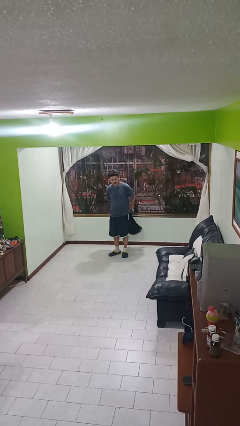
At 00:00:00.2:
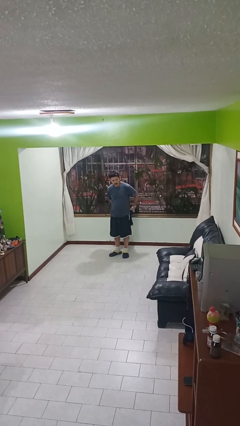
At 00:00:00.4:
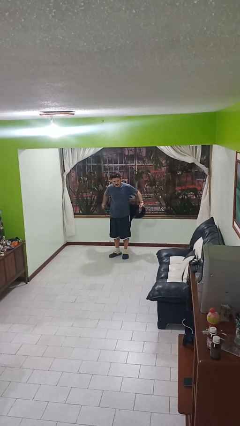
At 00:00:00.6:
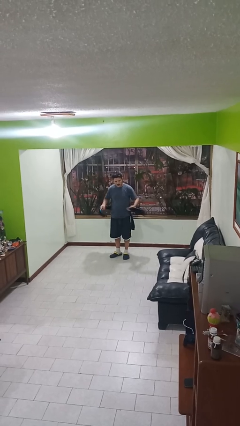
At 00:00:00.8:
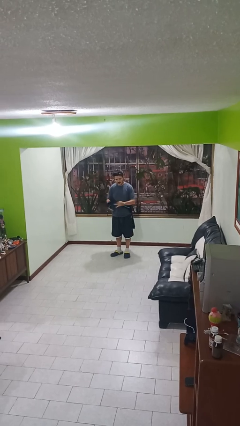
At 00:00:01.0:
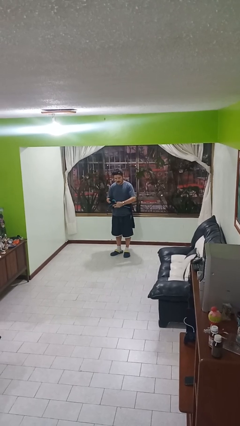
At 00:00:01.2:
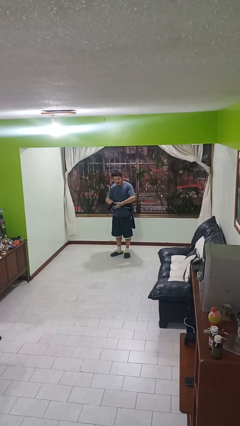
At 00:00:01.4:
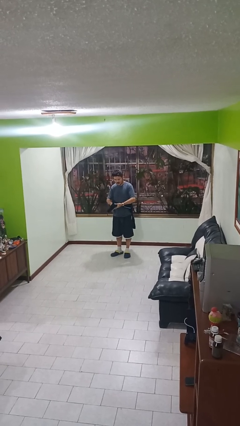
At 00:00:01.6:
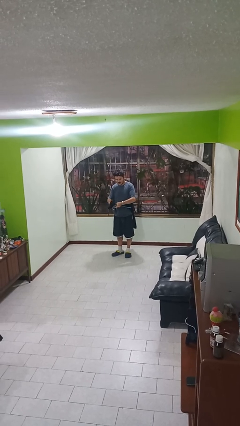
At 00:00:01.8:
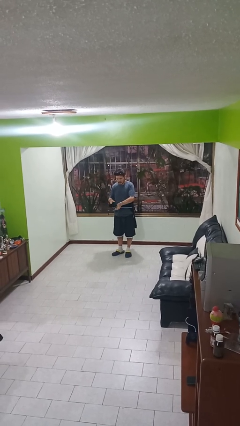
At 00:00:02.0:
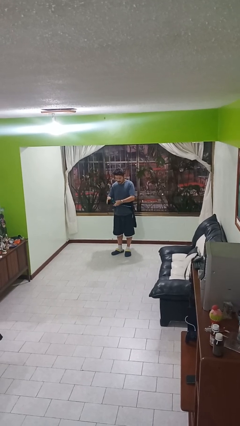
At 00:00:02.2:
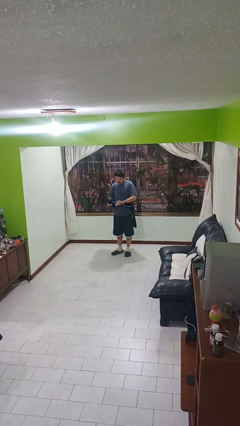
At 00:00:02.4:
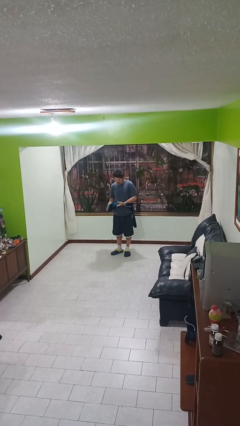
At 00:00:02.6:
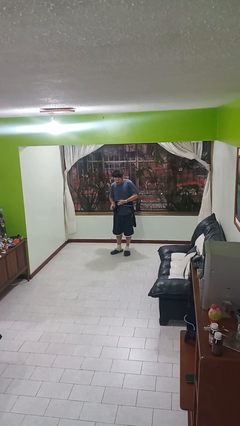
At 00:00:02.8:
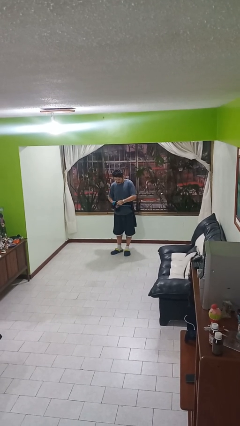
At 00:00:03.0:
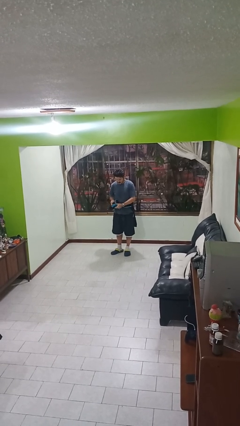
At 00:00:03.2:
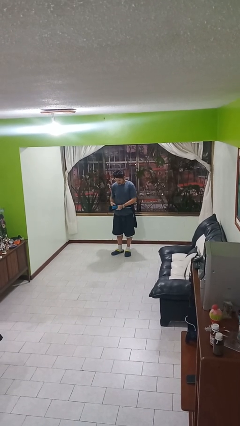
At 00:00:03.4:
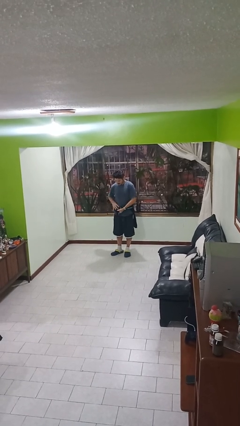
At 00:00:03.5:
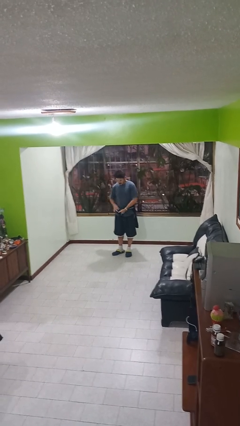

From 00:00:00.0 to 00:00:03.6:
person ties jacket around waist

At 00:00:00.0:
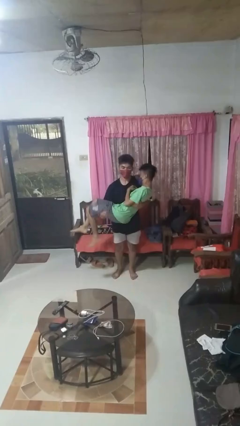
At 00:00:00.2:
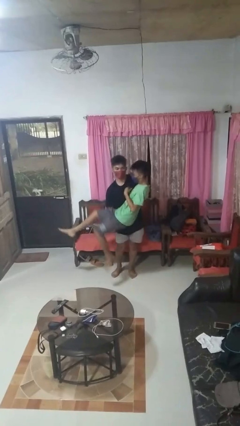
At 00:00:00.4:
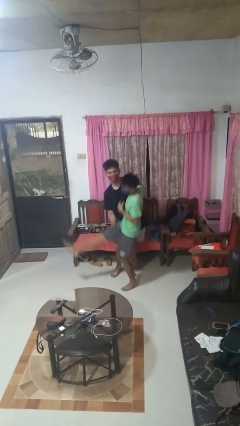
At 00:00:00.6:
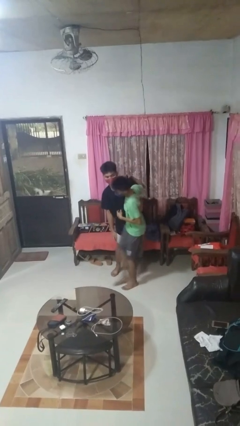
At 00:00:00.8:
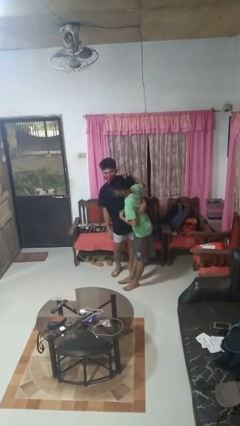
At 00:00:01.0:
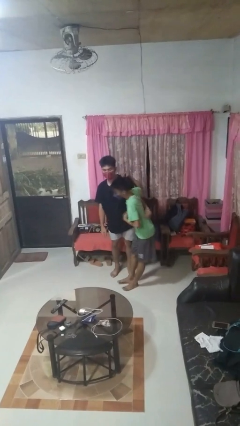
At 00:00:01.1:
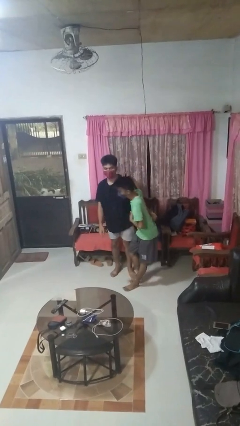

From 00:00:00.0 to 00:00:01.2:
person puts down person

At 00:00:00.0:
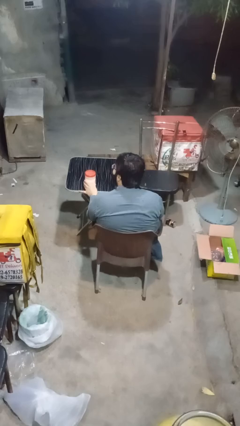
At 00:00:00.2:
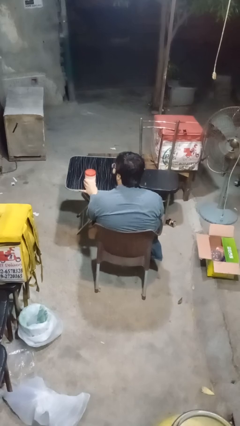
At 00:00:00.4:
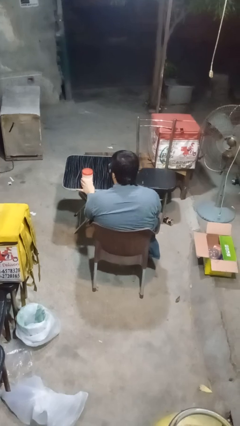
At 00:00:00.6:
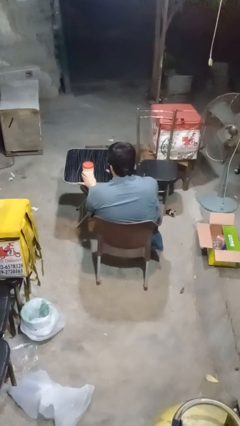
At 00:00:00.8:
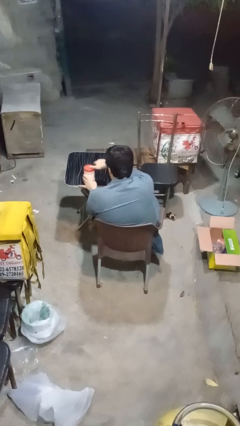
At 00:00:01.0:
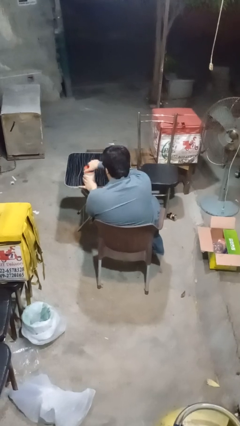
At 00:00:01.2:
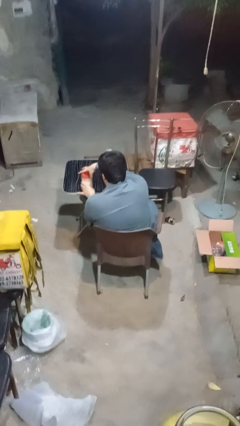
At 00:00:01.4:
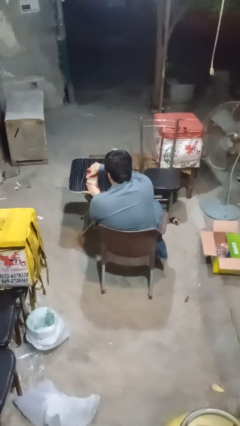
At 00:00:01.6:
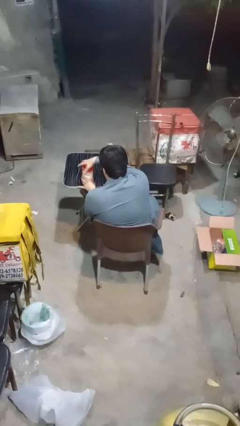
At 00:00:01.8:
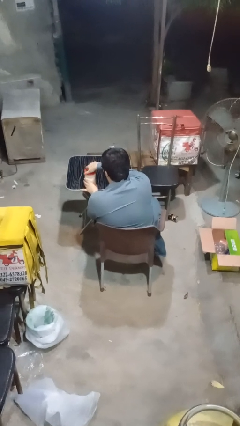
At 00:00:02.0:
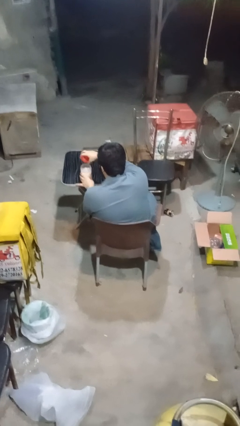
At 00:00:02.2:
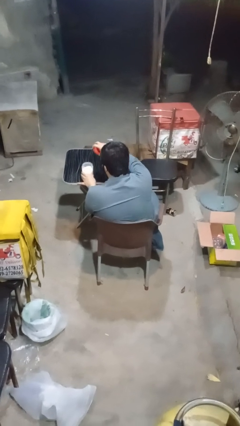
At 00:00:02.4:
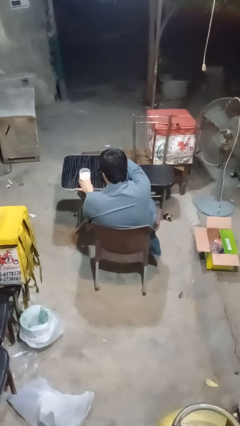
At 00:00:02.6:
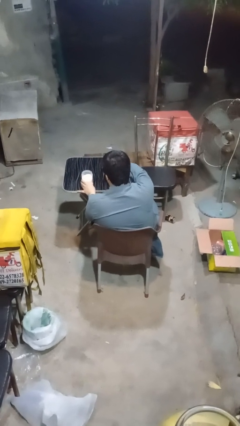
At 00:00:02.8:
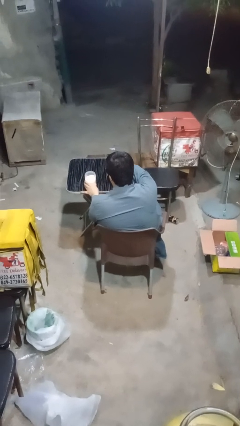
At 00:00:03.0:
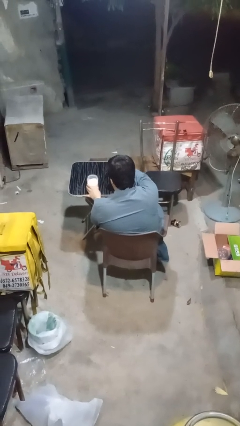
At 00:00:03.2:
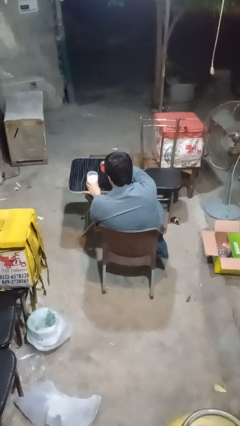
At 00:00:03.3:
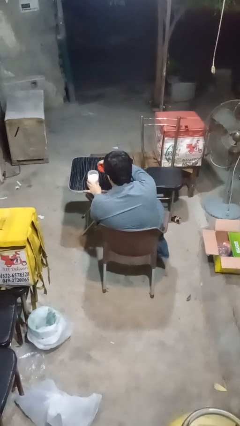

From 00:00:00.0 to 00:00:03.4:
person opens jar

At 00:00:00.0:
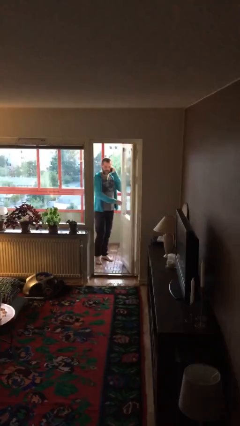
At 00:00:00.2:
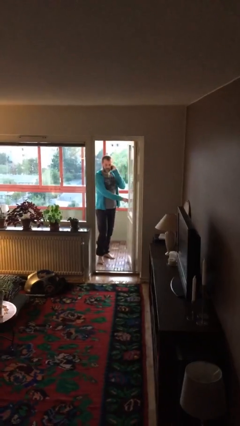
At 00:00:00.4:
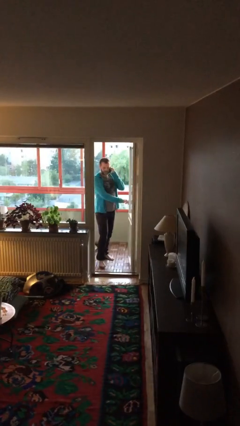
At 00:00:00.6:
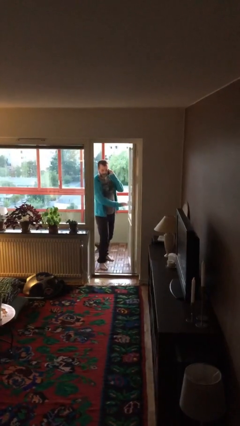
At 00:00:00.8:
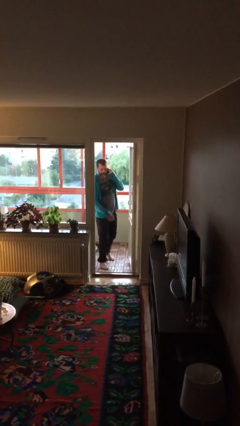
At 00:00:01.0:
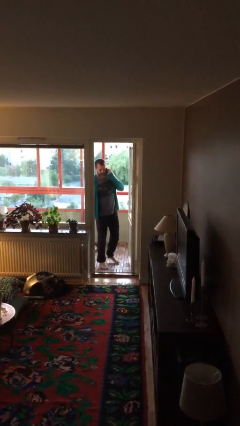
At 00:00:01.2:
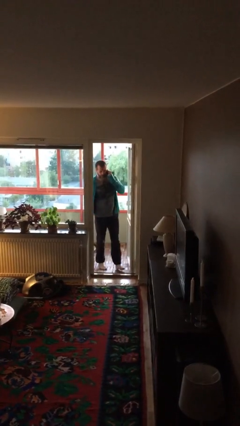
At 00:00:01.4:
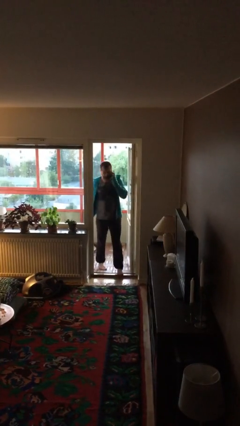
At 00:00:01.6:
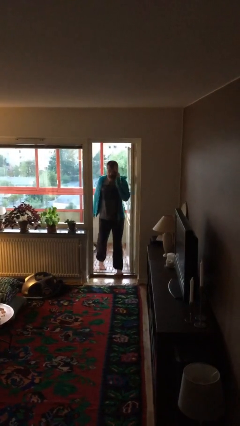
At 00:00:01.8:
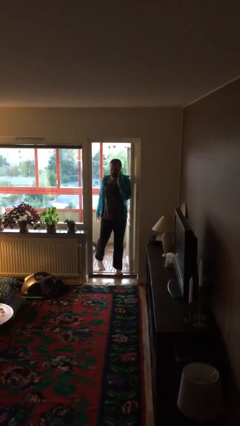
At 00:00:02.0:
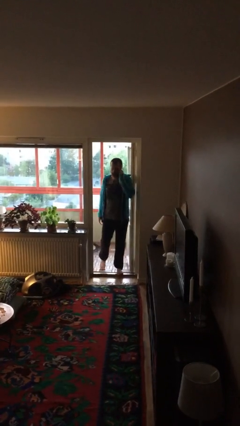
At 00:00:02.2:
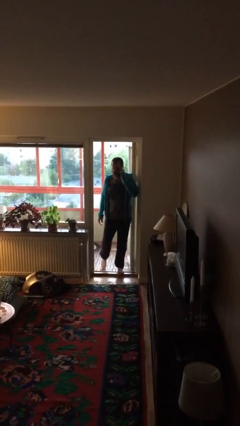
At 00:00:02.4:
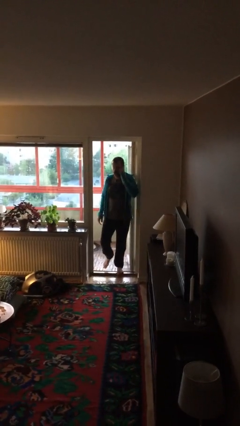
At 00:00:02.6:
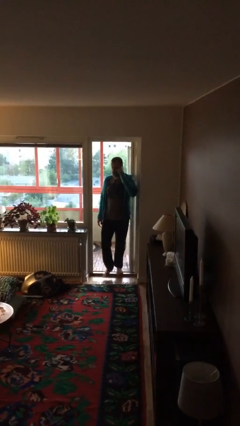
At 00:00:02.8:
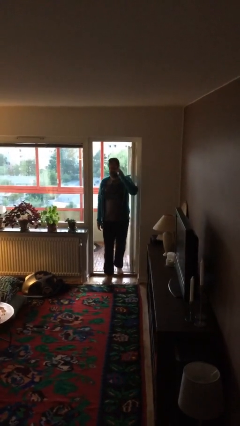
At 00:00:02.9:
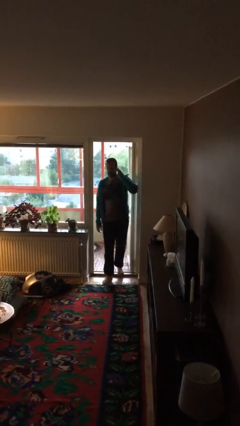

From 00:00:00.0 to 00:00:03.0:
person opens facility door

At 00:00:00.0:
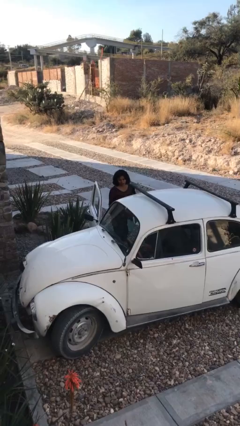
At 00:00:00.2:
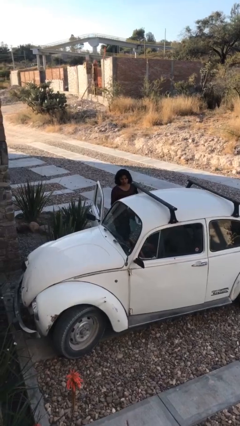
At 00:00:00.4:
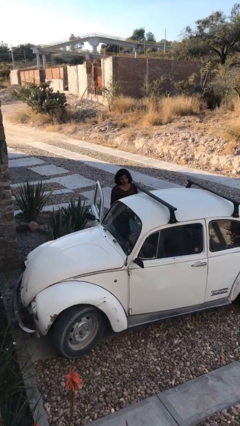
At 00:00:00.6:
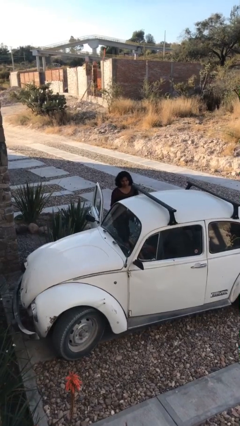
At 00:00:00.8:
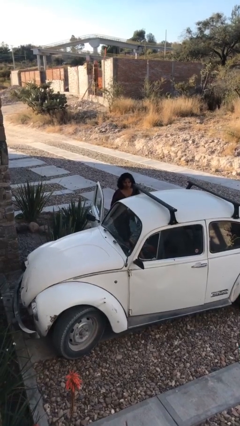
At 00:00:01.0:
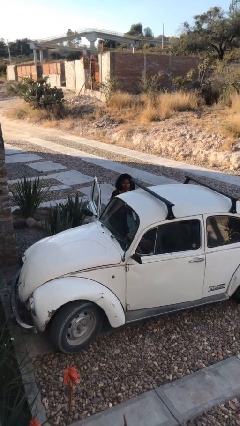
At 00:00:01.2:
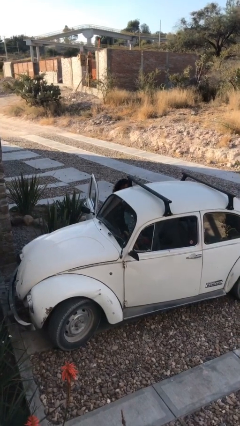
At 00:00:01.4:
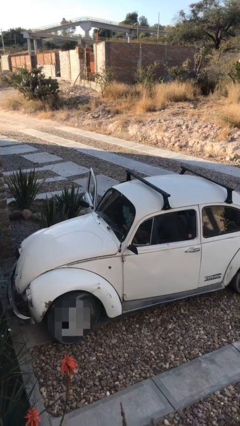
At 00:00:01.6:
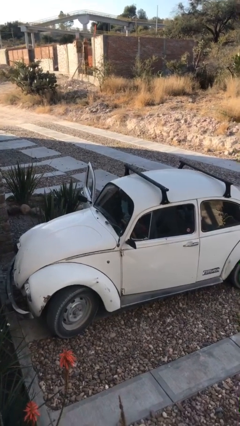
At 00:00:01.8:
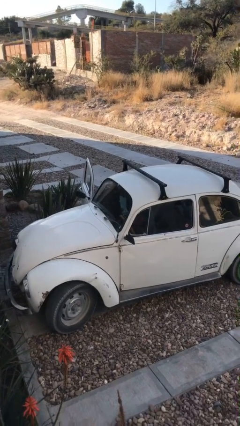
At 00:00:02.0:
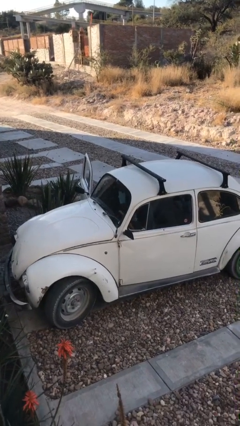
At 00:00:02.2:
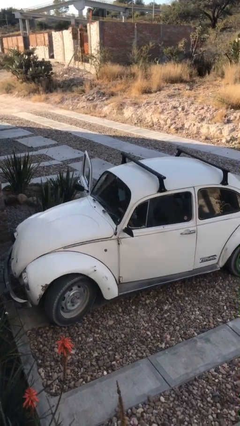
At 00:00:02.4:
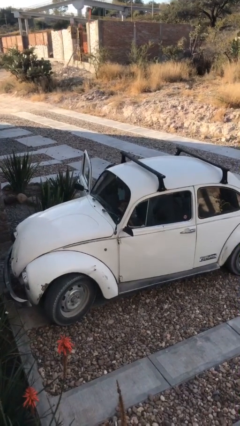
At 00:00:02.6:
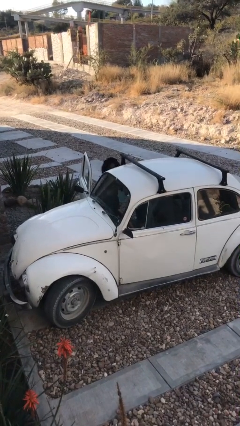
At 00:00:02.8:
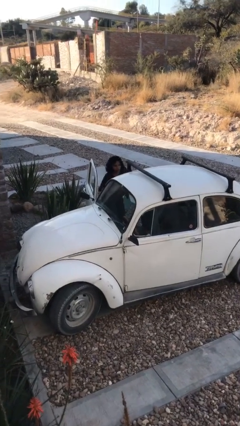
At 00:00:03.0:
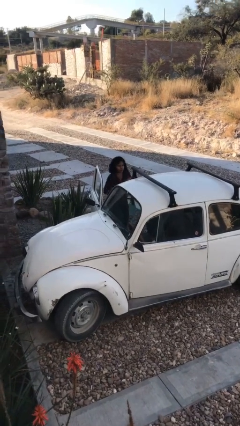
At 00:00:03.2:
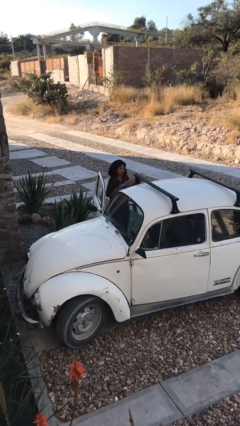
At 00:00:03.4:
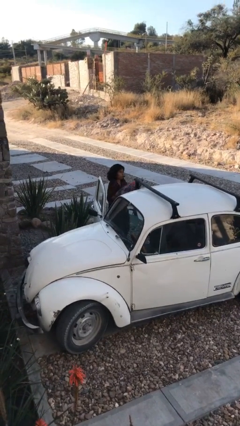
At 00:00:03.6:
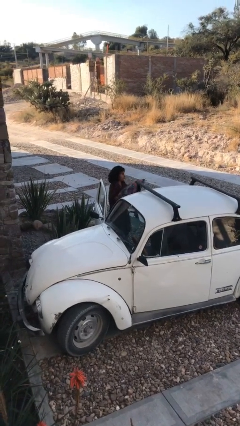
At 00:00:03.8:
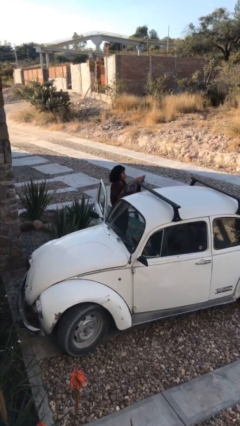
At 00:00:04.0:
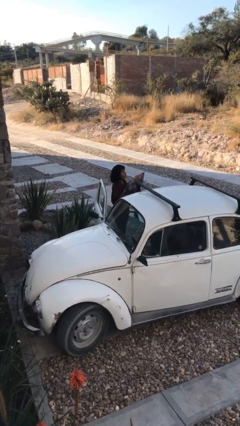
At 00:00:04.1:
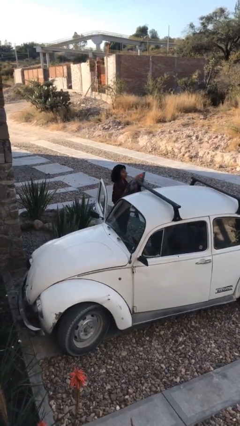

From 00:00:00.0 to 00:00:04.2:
person unloads car

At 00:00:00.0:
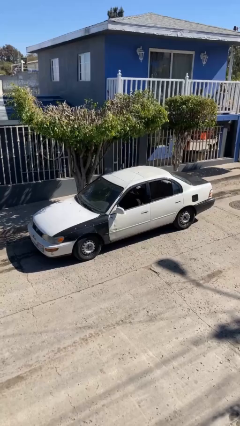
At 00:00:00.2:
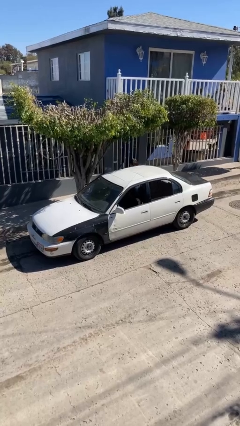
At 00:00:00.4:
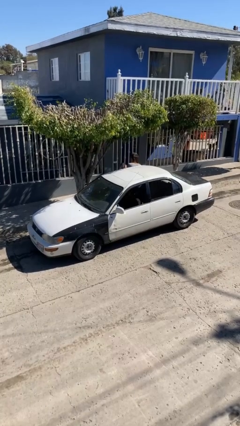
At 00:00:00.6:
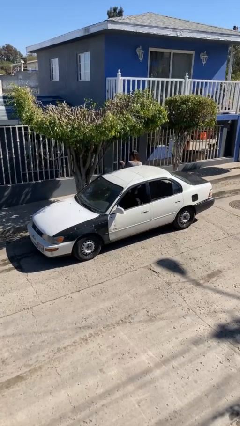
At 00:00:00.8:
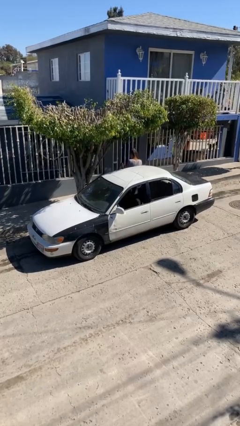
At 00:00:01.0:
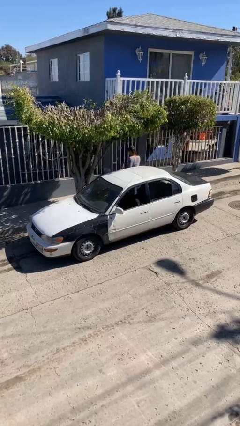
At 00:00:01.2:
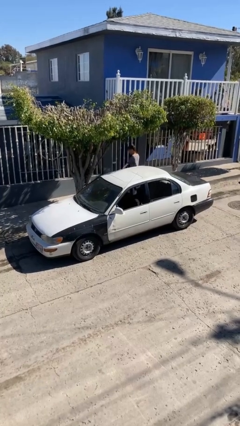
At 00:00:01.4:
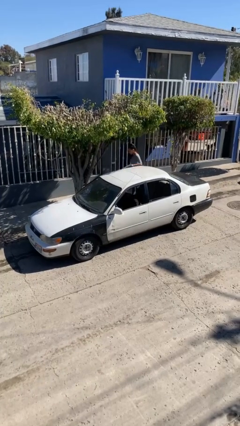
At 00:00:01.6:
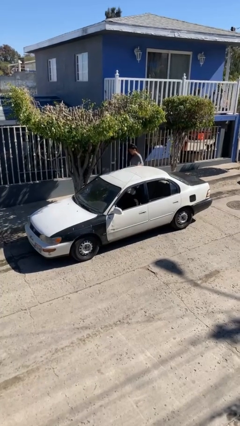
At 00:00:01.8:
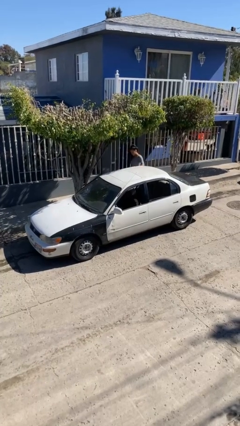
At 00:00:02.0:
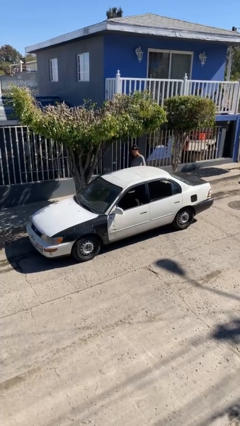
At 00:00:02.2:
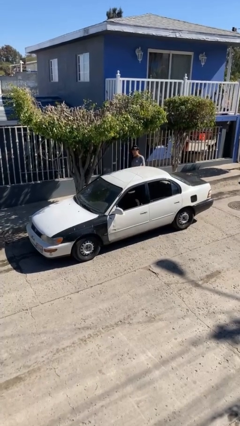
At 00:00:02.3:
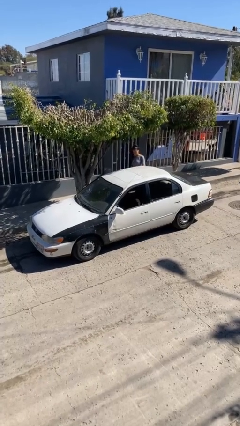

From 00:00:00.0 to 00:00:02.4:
car drops off person
